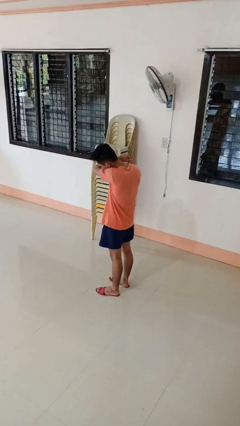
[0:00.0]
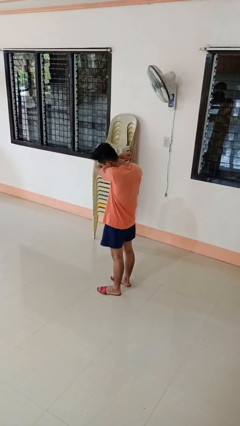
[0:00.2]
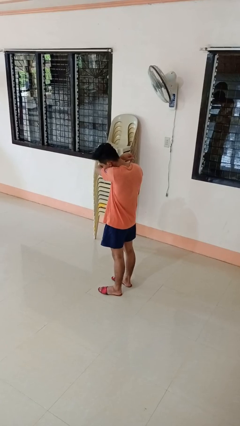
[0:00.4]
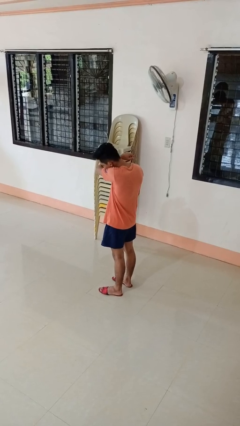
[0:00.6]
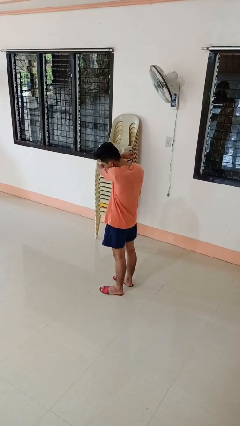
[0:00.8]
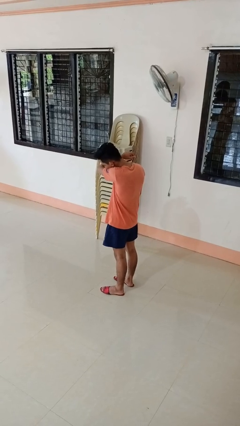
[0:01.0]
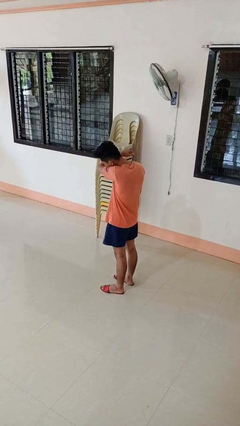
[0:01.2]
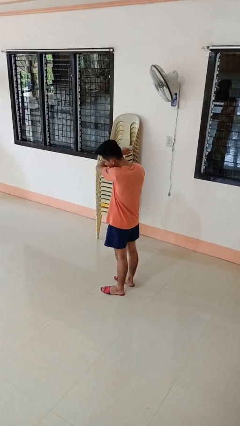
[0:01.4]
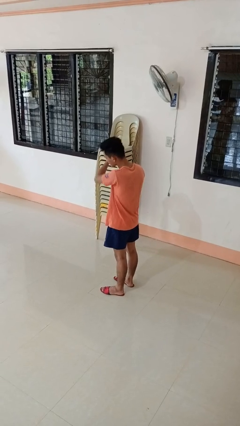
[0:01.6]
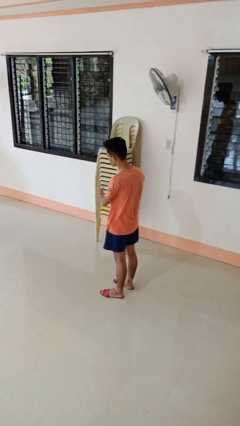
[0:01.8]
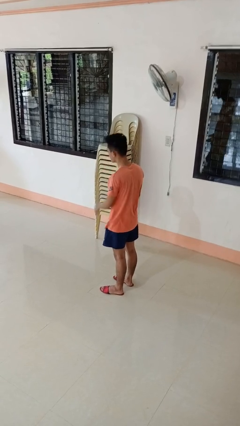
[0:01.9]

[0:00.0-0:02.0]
person sneezes into arm

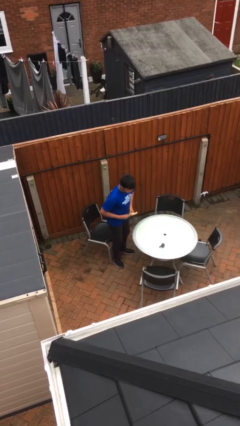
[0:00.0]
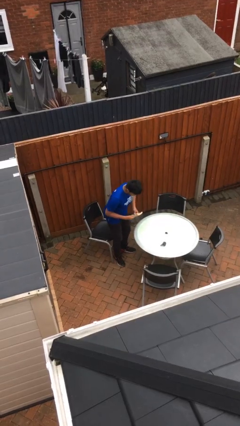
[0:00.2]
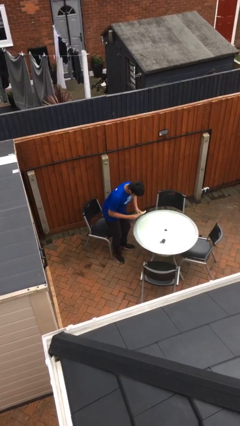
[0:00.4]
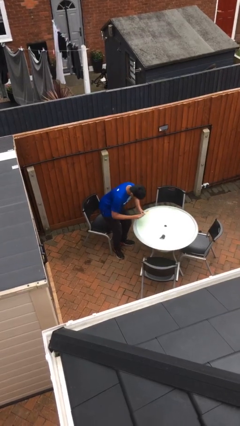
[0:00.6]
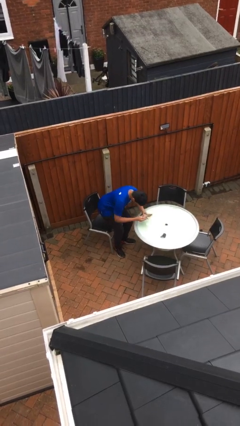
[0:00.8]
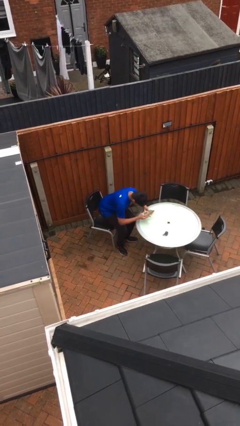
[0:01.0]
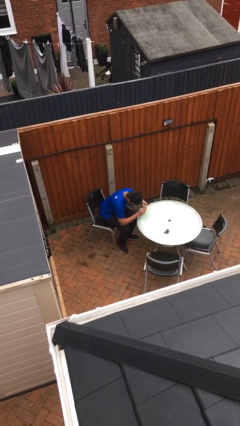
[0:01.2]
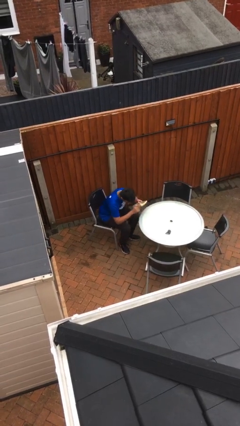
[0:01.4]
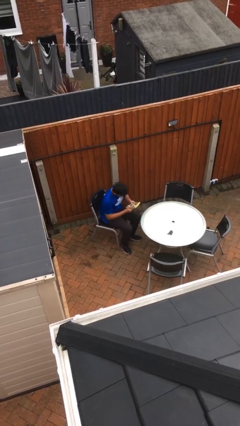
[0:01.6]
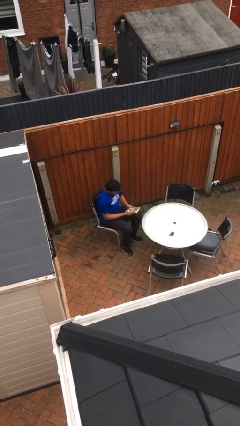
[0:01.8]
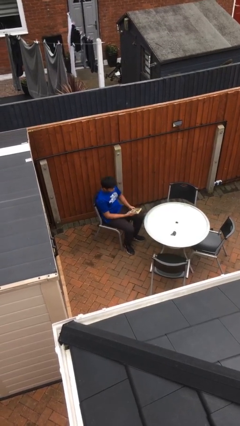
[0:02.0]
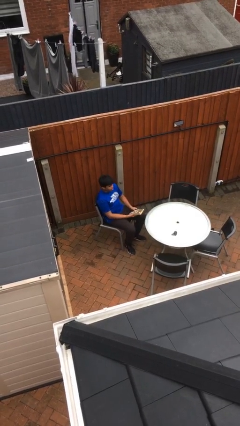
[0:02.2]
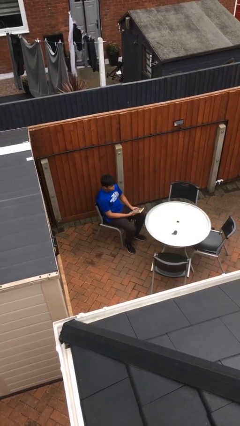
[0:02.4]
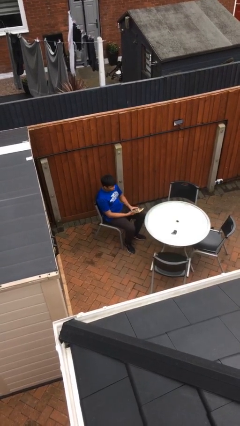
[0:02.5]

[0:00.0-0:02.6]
person sits down

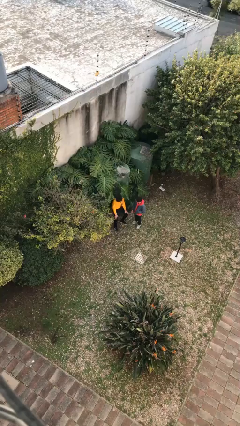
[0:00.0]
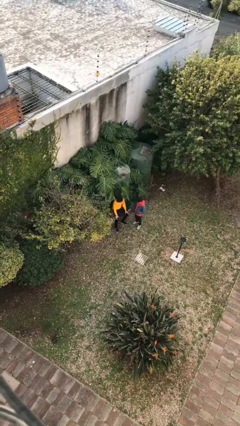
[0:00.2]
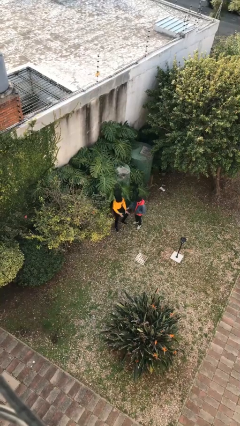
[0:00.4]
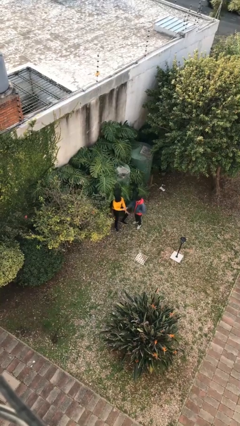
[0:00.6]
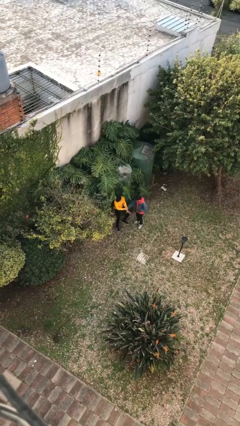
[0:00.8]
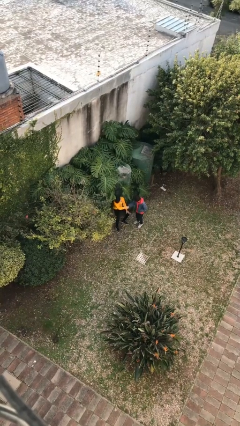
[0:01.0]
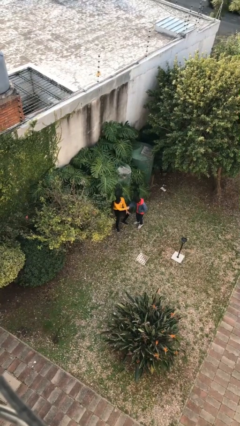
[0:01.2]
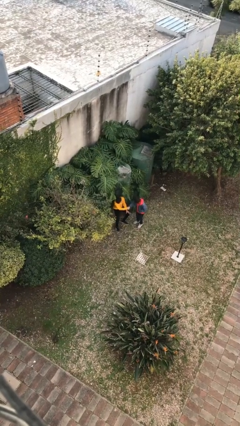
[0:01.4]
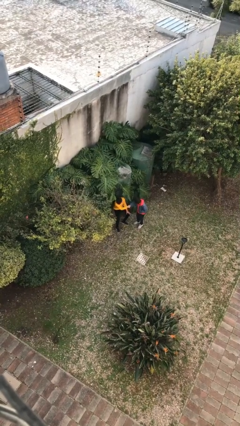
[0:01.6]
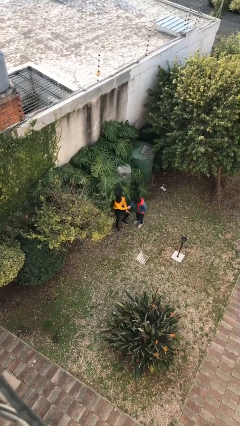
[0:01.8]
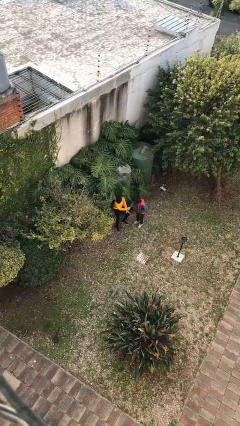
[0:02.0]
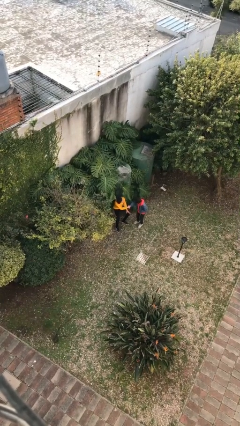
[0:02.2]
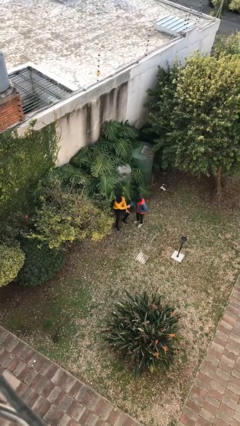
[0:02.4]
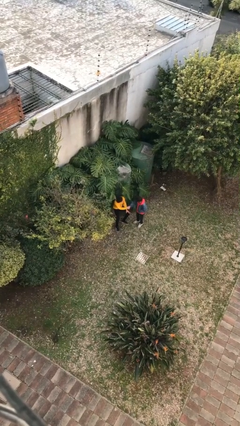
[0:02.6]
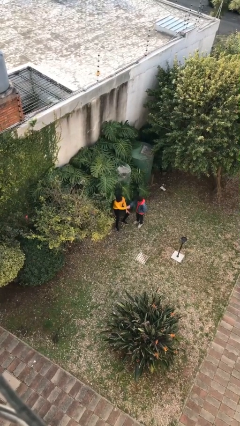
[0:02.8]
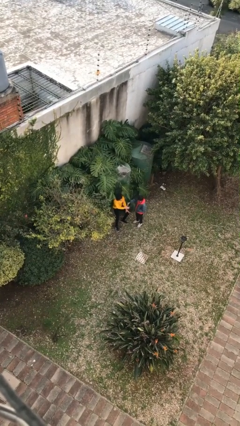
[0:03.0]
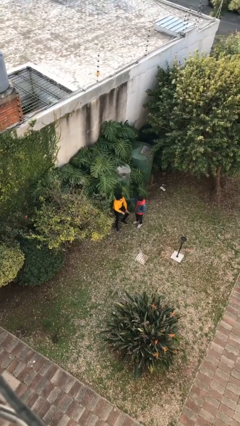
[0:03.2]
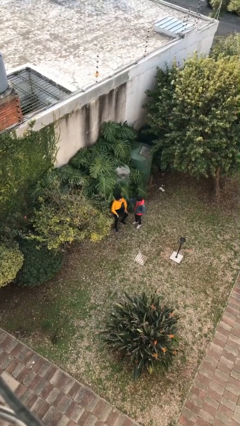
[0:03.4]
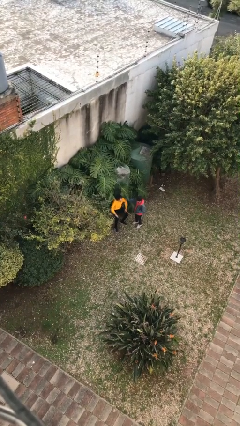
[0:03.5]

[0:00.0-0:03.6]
person shakes hand

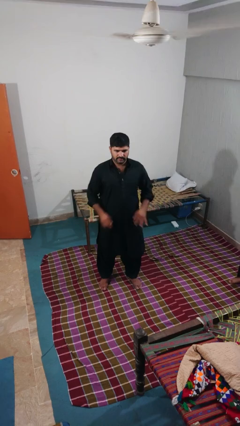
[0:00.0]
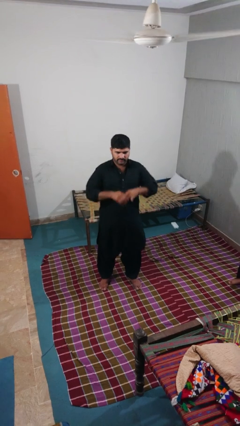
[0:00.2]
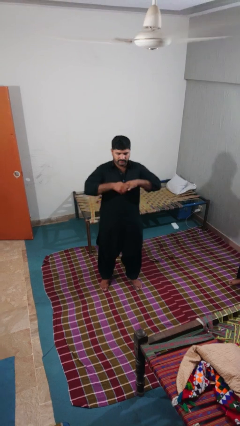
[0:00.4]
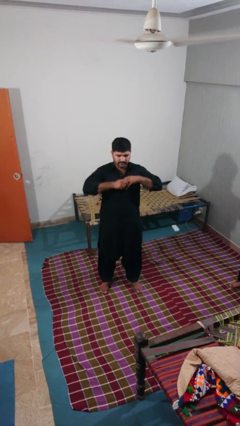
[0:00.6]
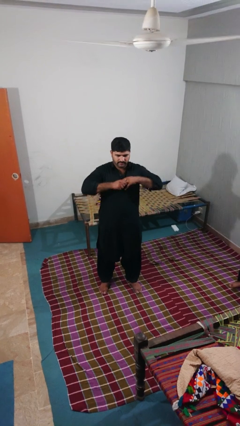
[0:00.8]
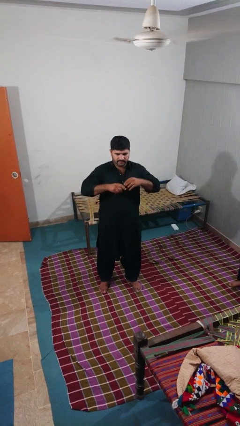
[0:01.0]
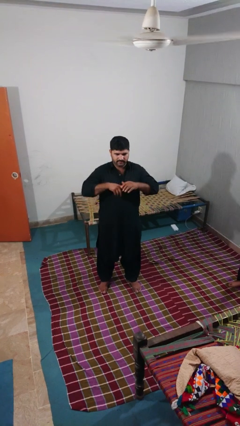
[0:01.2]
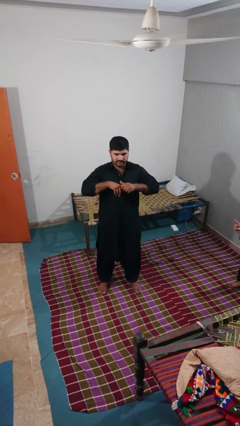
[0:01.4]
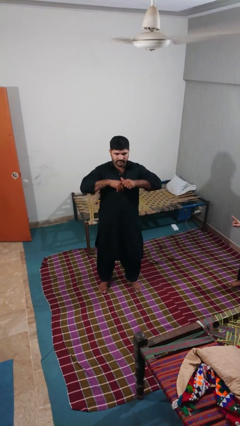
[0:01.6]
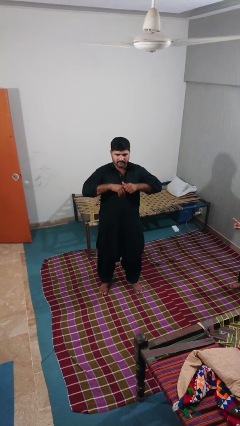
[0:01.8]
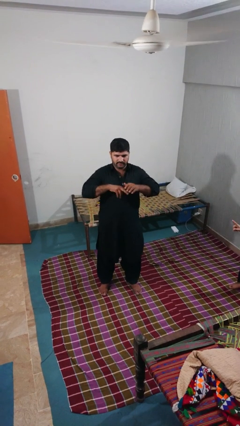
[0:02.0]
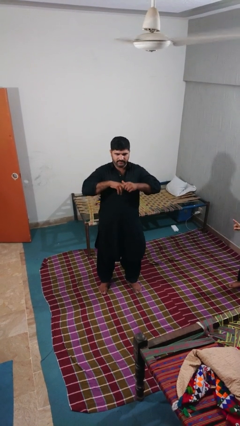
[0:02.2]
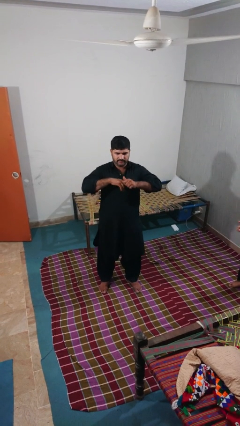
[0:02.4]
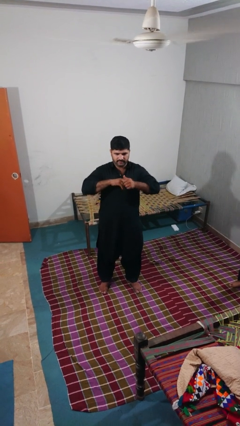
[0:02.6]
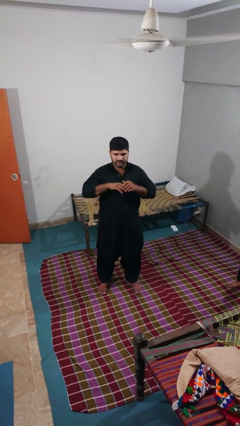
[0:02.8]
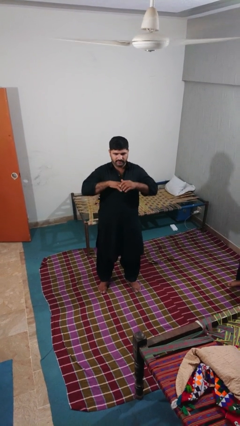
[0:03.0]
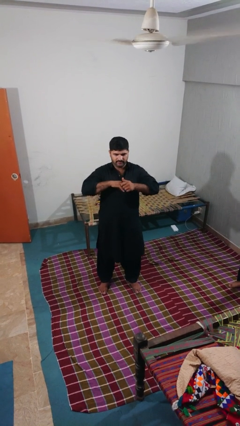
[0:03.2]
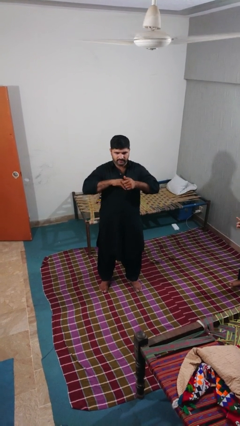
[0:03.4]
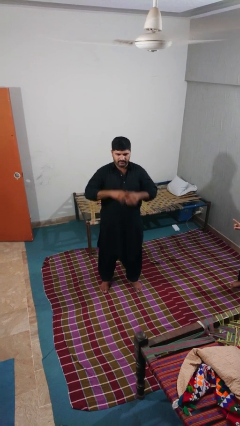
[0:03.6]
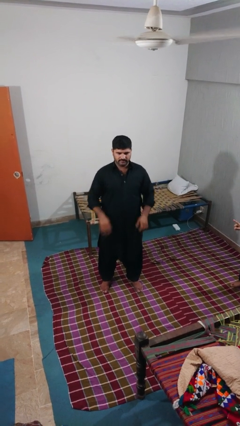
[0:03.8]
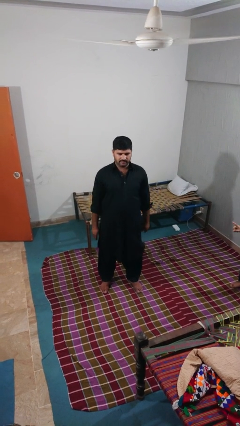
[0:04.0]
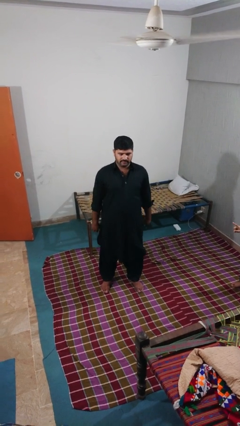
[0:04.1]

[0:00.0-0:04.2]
person cracks knuckles

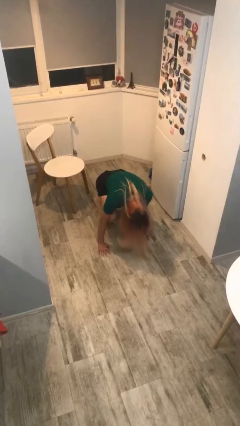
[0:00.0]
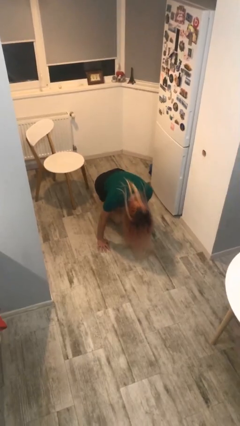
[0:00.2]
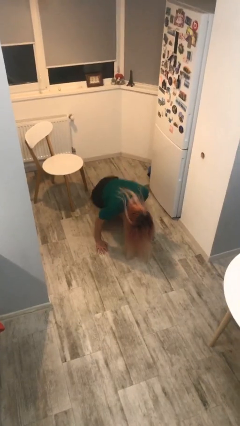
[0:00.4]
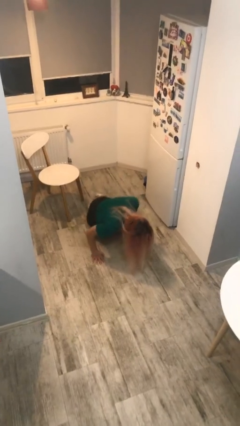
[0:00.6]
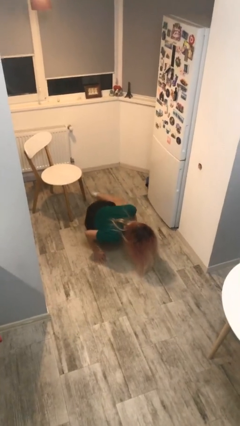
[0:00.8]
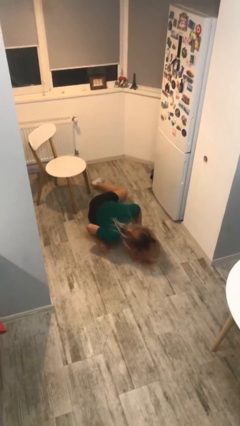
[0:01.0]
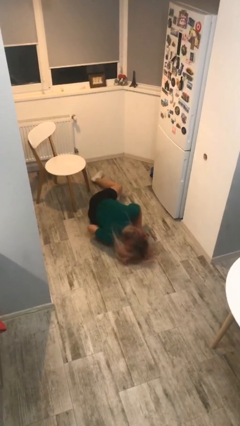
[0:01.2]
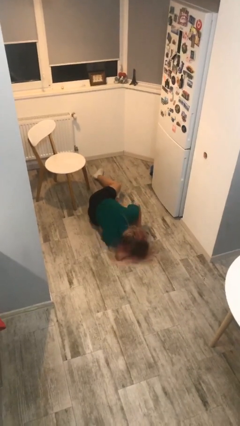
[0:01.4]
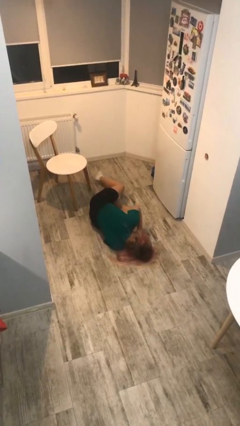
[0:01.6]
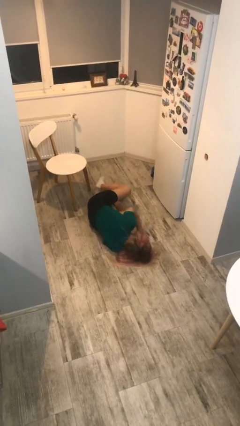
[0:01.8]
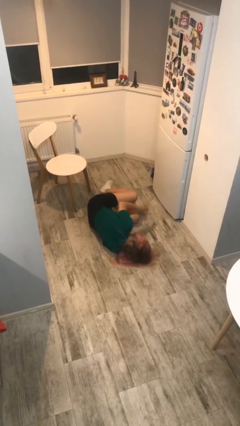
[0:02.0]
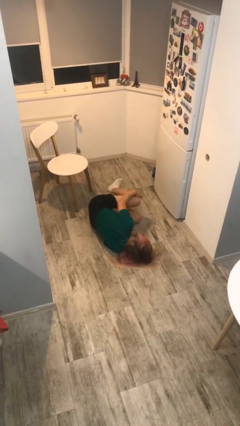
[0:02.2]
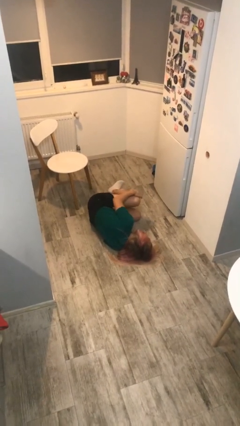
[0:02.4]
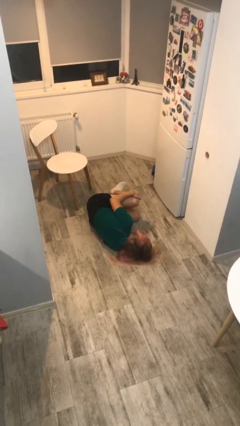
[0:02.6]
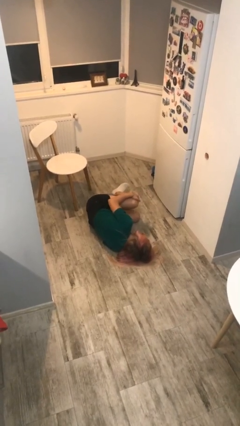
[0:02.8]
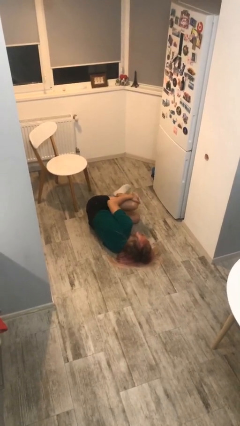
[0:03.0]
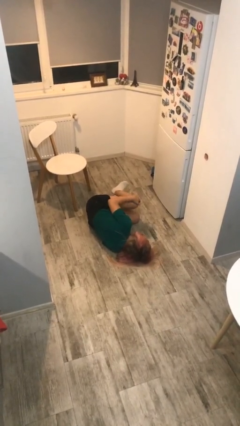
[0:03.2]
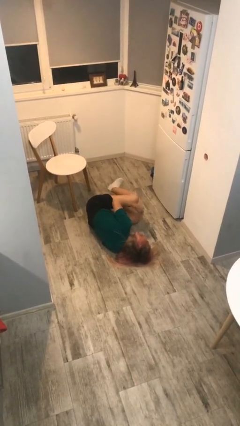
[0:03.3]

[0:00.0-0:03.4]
person lies down on floor

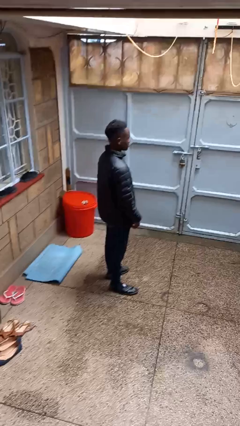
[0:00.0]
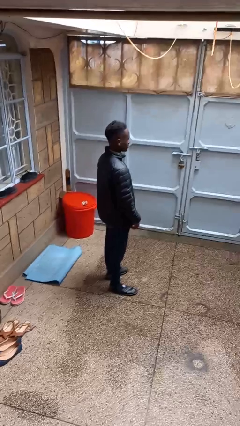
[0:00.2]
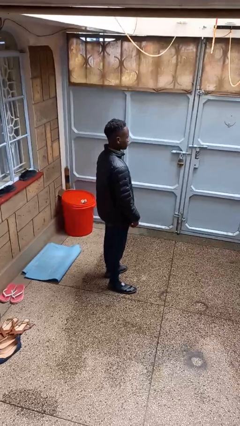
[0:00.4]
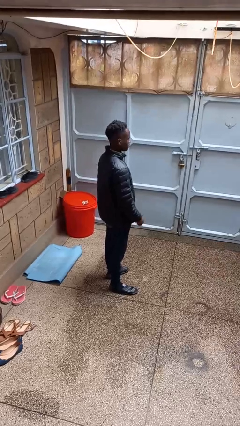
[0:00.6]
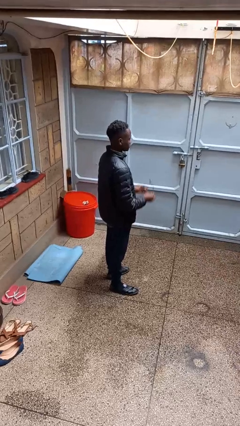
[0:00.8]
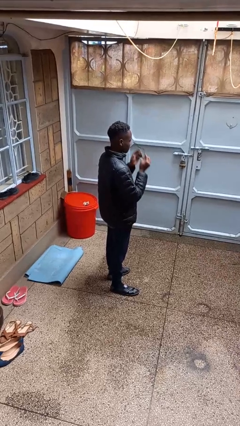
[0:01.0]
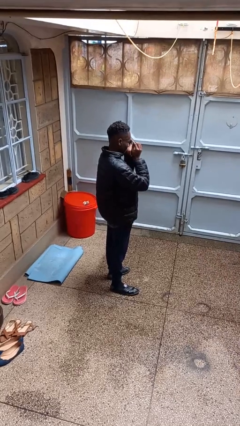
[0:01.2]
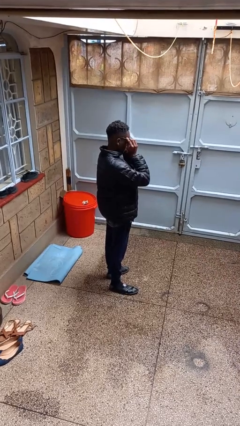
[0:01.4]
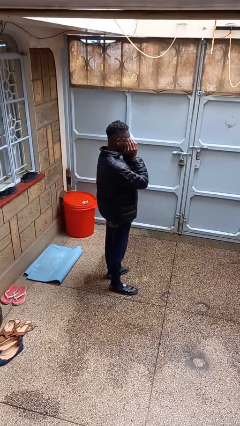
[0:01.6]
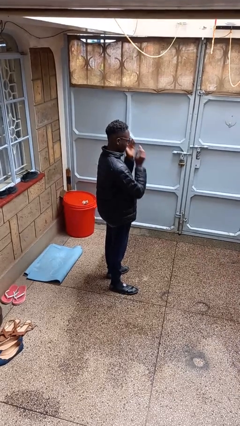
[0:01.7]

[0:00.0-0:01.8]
person puts on glasses
